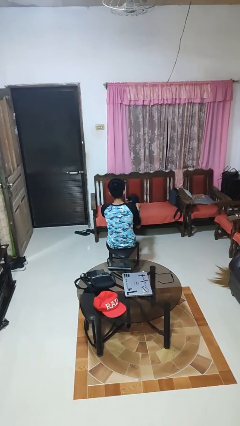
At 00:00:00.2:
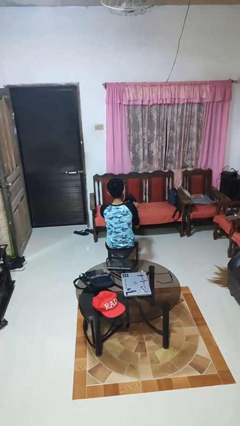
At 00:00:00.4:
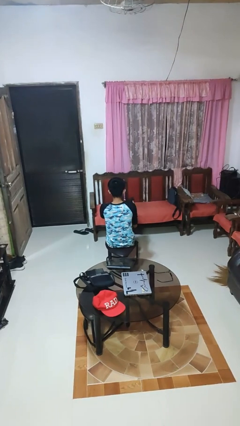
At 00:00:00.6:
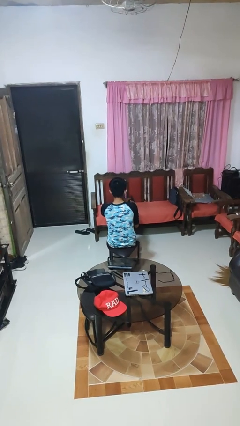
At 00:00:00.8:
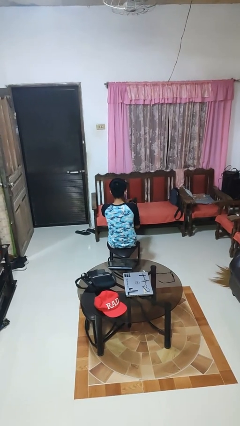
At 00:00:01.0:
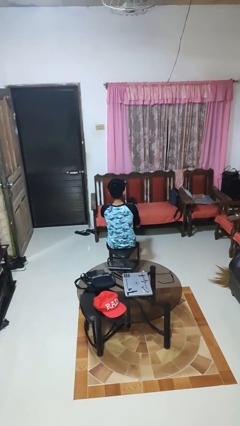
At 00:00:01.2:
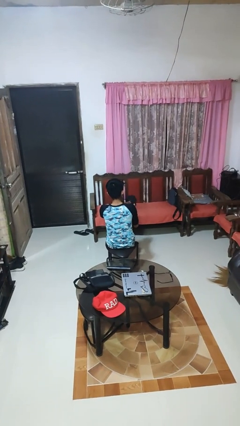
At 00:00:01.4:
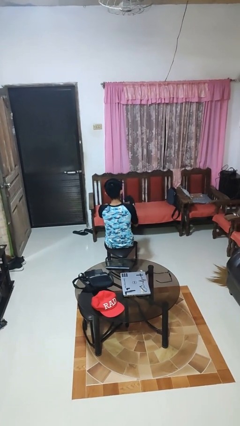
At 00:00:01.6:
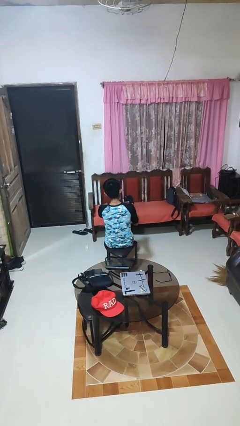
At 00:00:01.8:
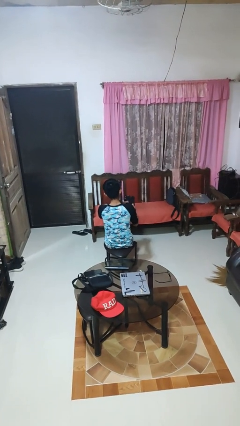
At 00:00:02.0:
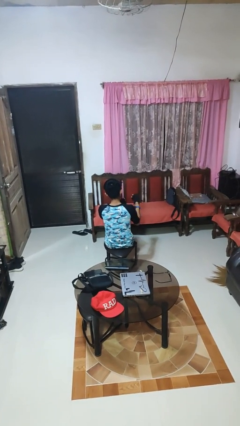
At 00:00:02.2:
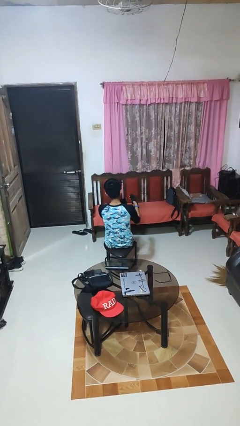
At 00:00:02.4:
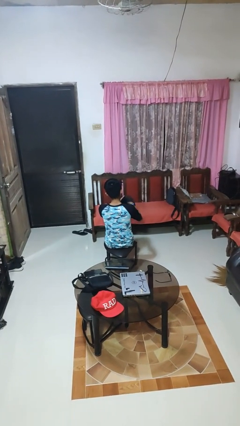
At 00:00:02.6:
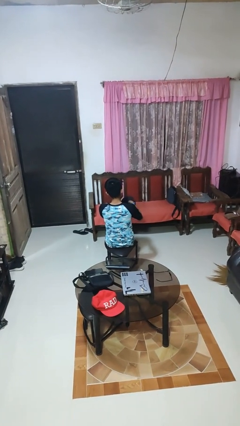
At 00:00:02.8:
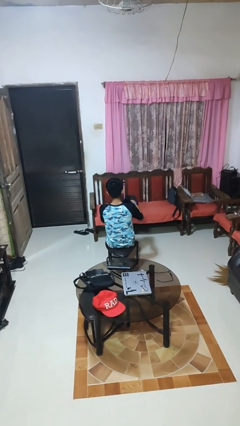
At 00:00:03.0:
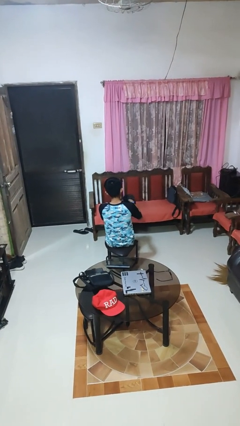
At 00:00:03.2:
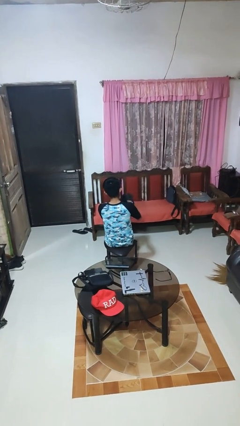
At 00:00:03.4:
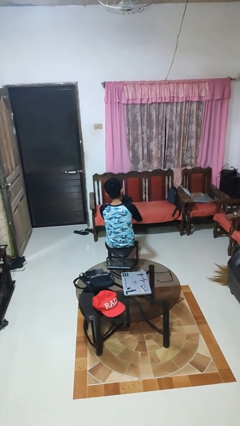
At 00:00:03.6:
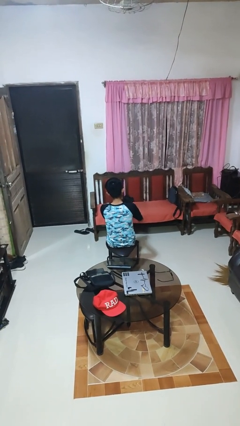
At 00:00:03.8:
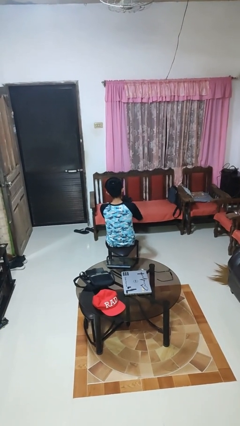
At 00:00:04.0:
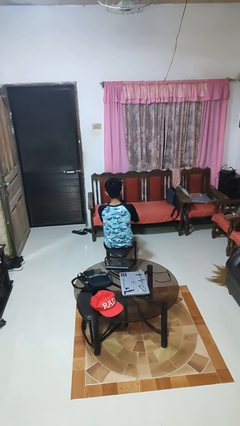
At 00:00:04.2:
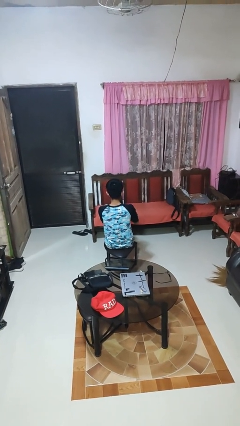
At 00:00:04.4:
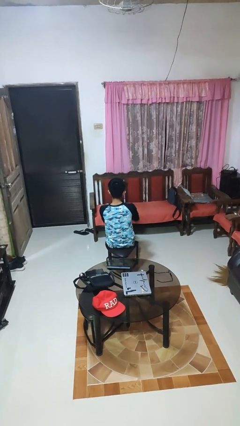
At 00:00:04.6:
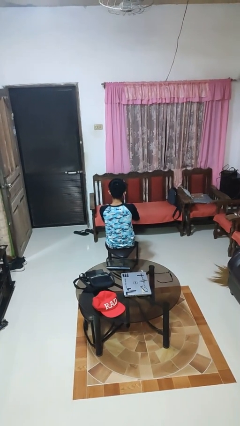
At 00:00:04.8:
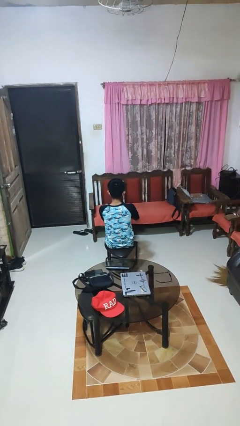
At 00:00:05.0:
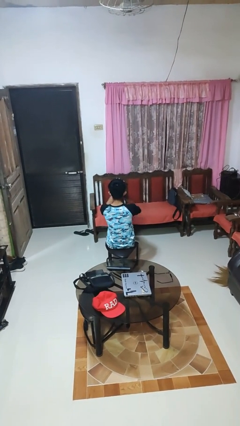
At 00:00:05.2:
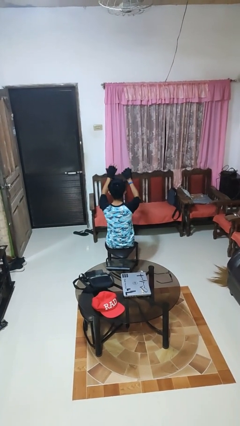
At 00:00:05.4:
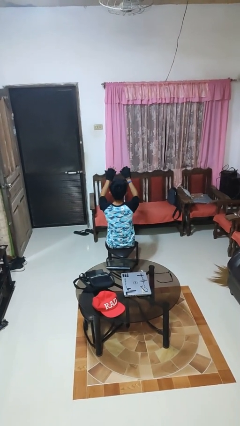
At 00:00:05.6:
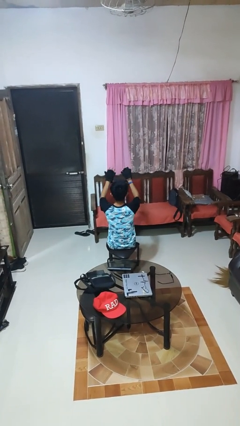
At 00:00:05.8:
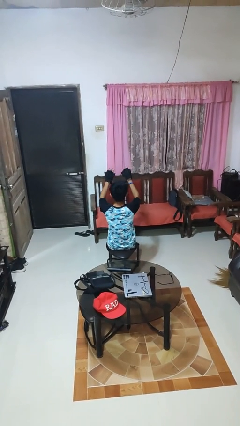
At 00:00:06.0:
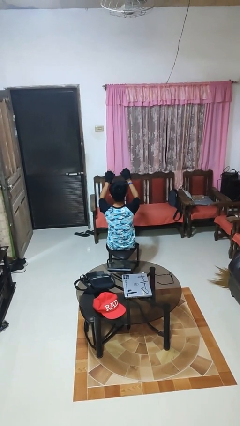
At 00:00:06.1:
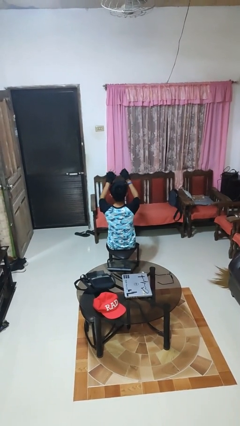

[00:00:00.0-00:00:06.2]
person puts on gloves

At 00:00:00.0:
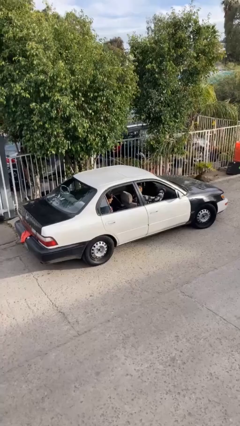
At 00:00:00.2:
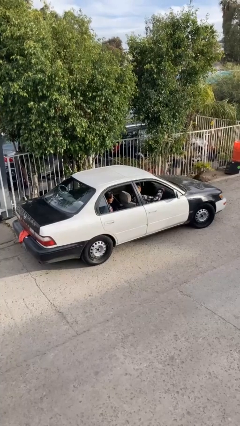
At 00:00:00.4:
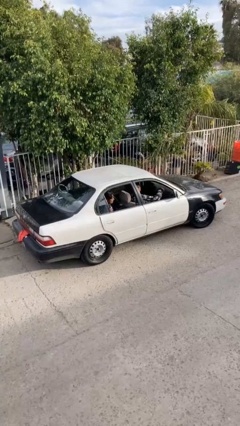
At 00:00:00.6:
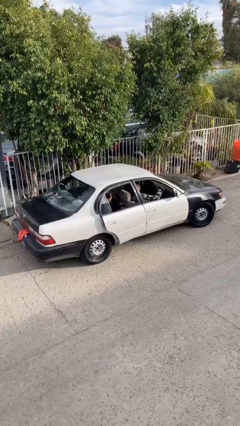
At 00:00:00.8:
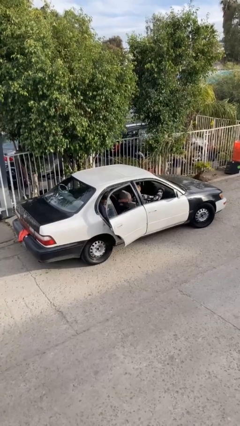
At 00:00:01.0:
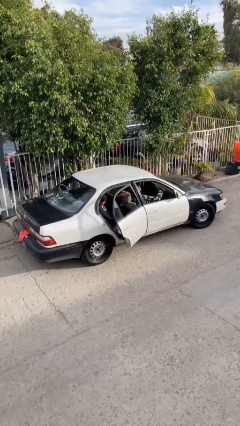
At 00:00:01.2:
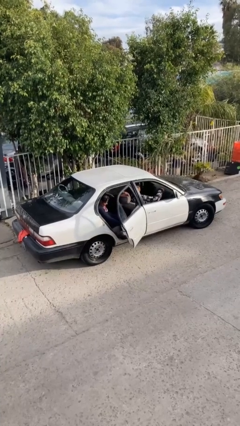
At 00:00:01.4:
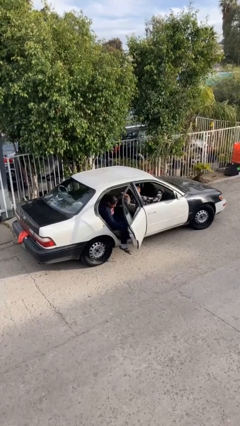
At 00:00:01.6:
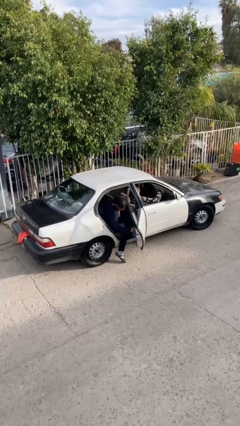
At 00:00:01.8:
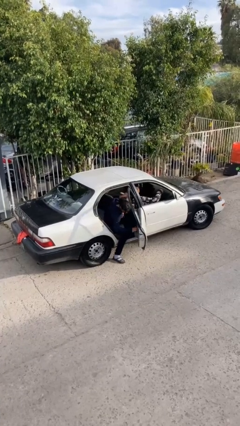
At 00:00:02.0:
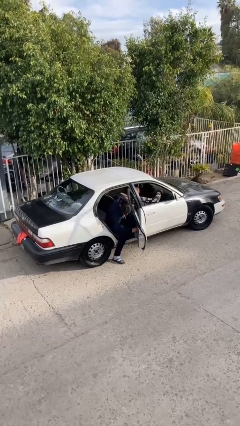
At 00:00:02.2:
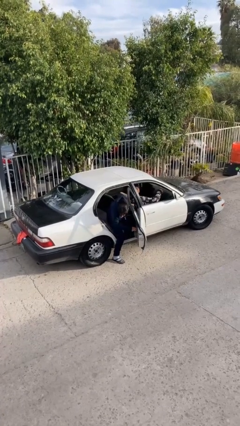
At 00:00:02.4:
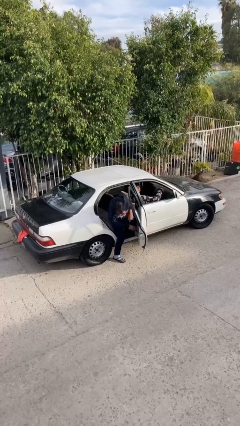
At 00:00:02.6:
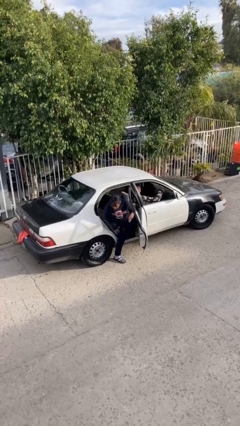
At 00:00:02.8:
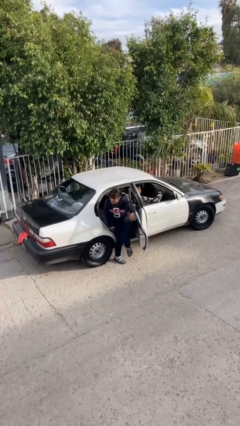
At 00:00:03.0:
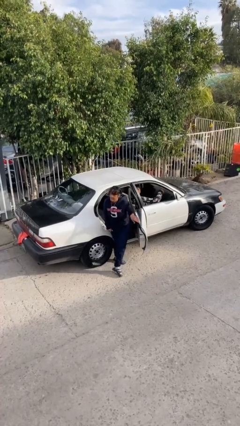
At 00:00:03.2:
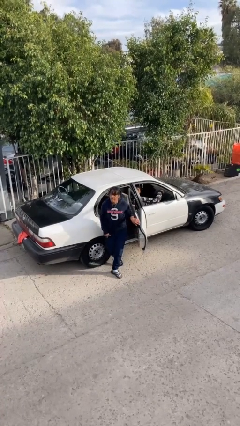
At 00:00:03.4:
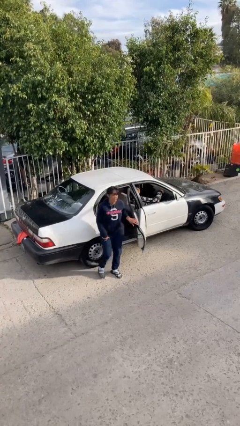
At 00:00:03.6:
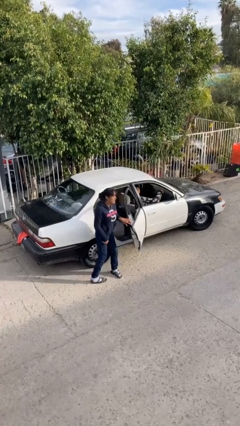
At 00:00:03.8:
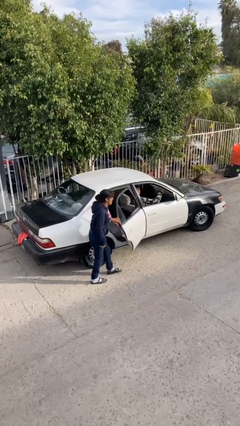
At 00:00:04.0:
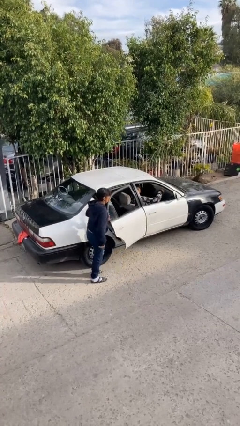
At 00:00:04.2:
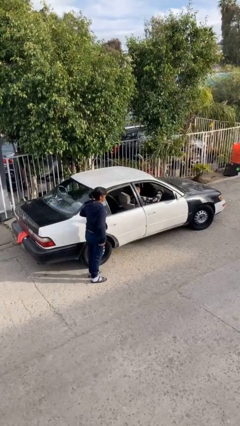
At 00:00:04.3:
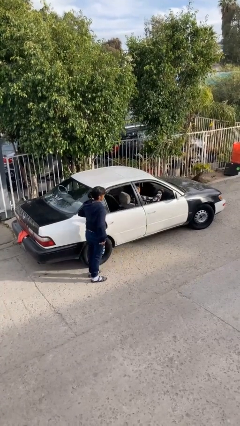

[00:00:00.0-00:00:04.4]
car drops off person

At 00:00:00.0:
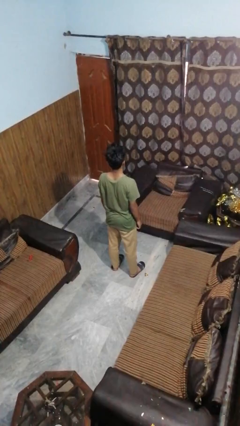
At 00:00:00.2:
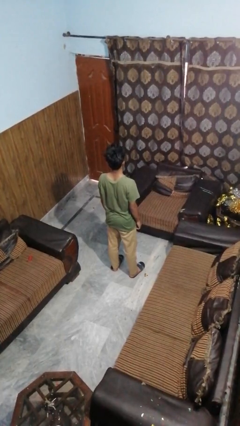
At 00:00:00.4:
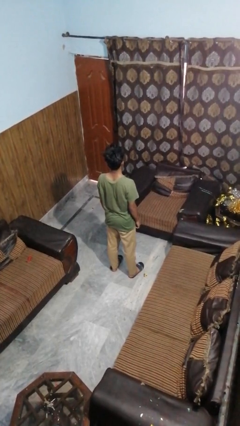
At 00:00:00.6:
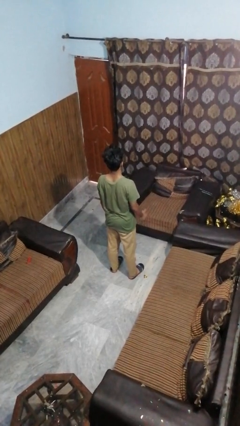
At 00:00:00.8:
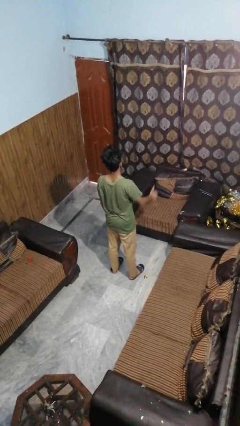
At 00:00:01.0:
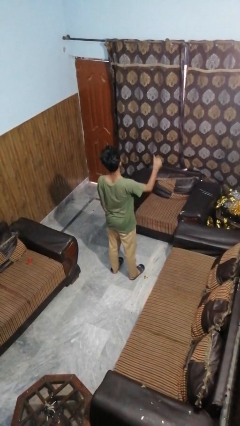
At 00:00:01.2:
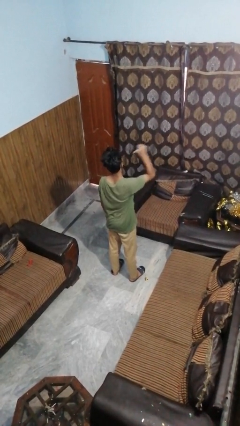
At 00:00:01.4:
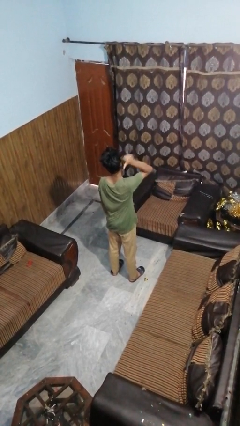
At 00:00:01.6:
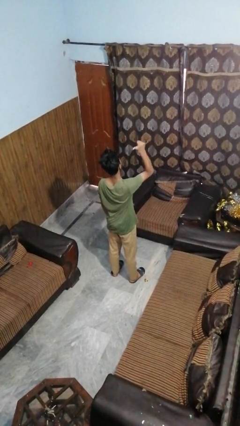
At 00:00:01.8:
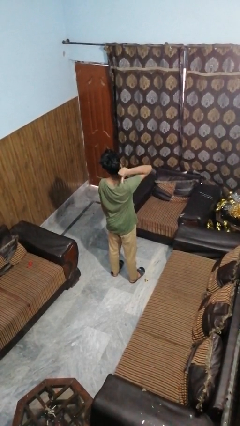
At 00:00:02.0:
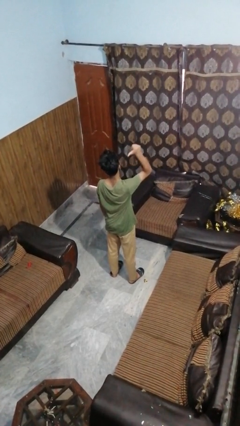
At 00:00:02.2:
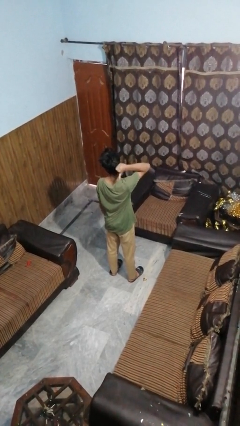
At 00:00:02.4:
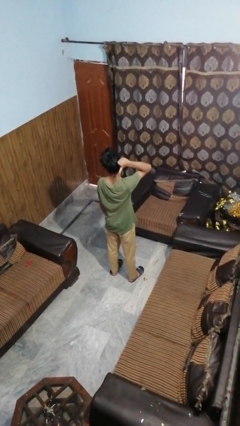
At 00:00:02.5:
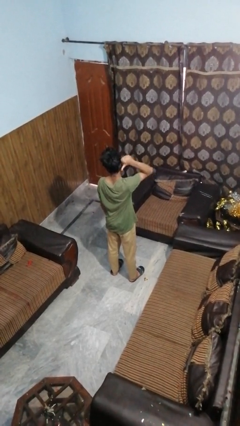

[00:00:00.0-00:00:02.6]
person gestures behind me

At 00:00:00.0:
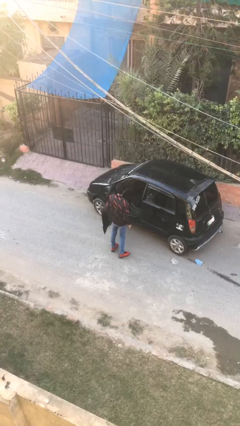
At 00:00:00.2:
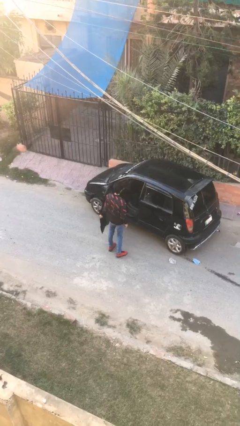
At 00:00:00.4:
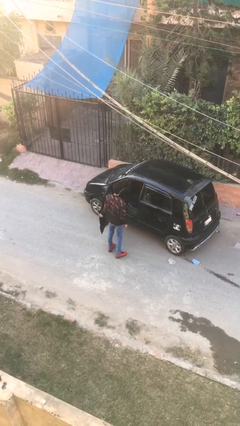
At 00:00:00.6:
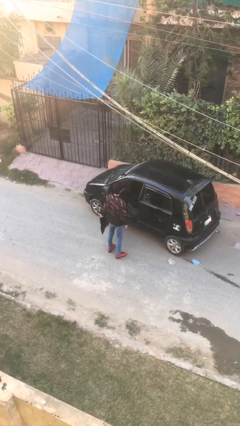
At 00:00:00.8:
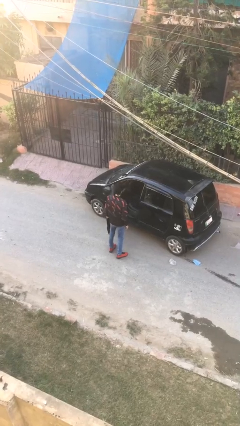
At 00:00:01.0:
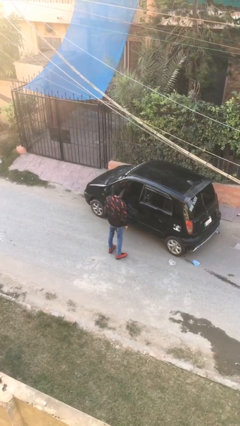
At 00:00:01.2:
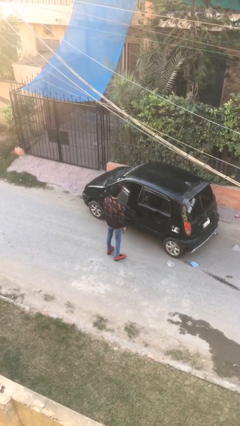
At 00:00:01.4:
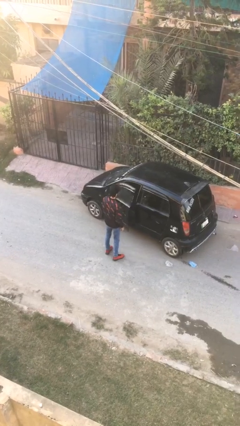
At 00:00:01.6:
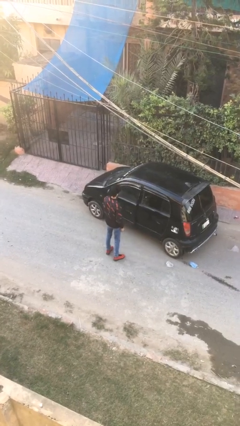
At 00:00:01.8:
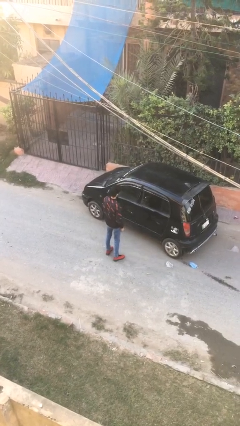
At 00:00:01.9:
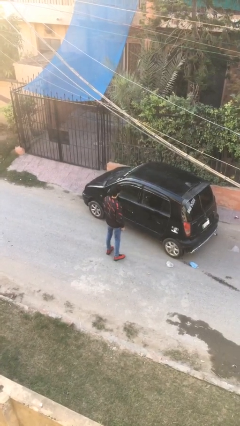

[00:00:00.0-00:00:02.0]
person closes car door

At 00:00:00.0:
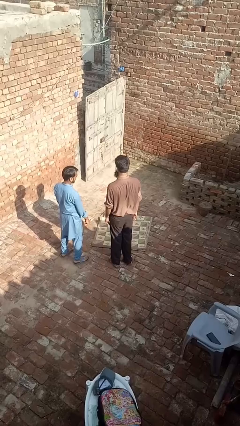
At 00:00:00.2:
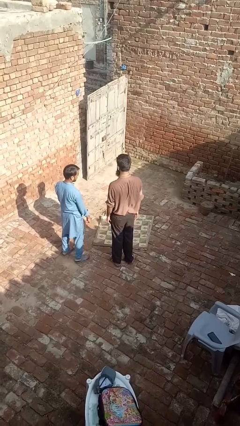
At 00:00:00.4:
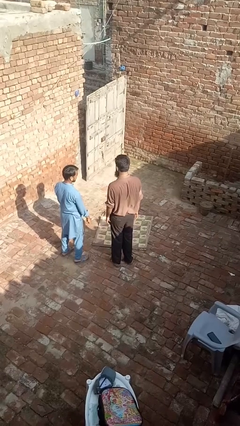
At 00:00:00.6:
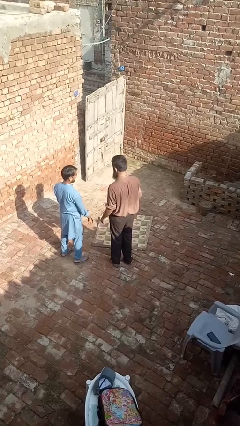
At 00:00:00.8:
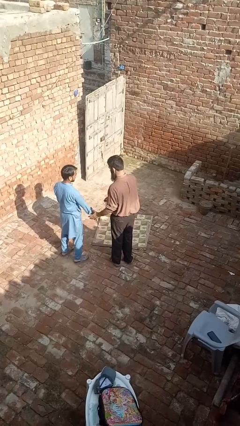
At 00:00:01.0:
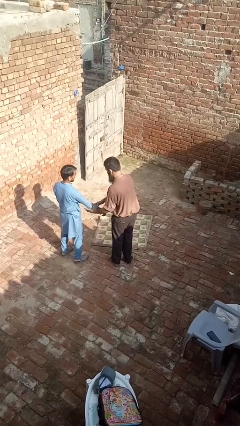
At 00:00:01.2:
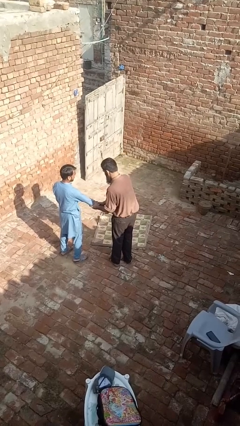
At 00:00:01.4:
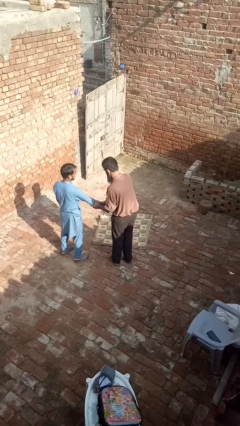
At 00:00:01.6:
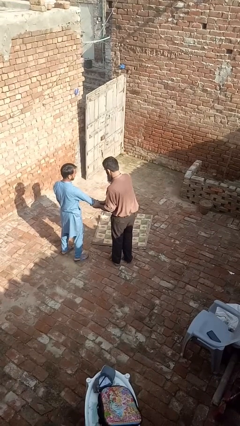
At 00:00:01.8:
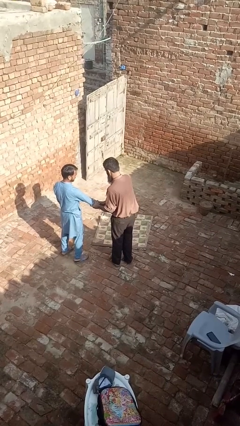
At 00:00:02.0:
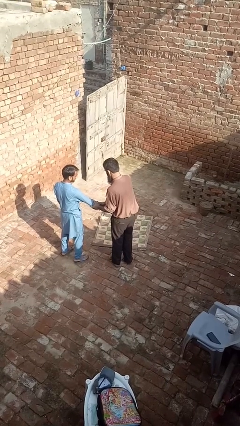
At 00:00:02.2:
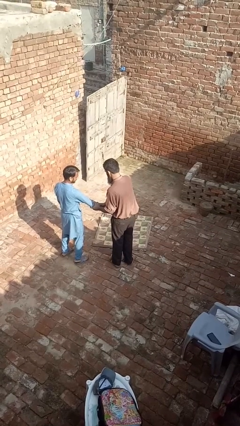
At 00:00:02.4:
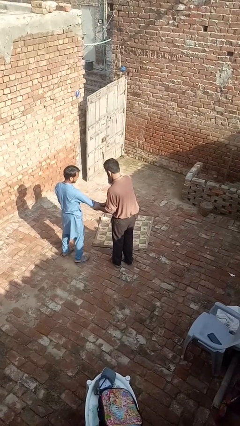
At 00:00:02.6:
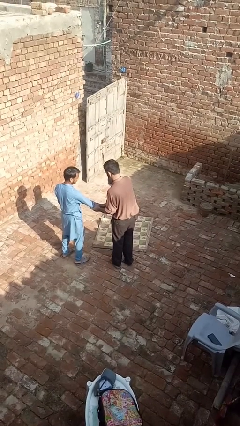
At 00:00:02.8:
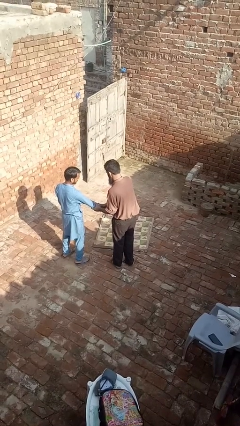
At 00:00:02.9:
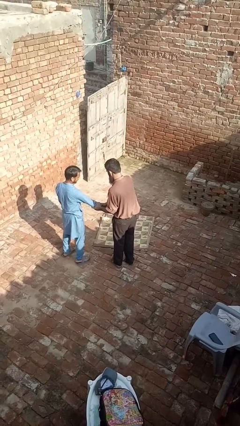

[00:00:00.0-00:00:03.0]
person grabs person by forearm
